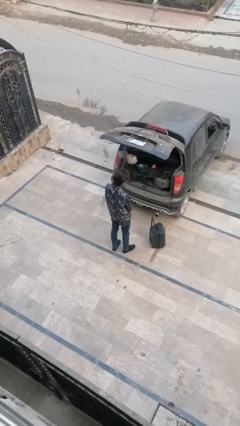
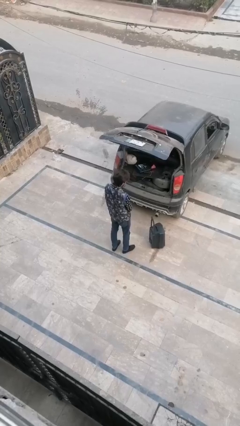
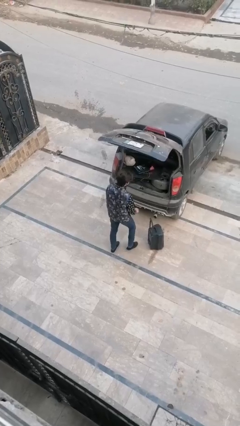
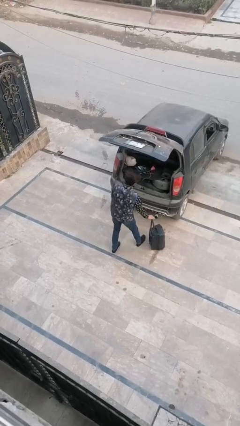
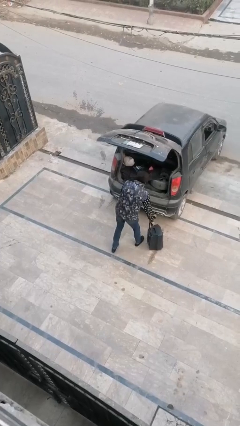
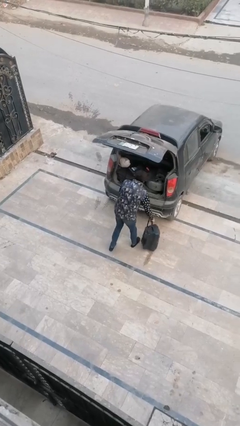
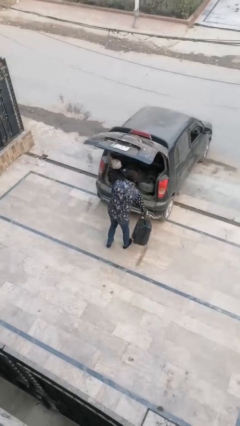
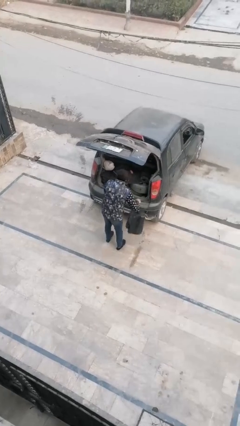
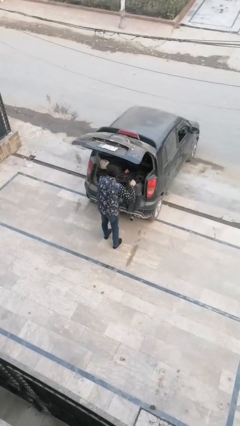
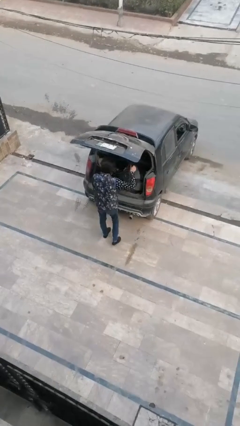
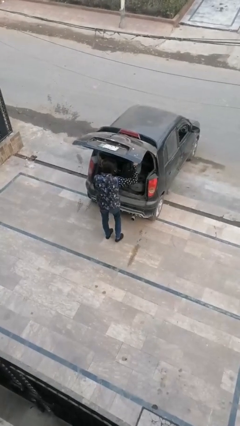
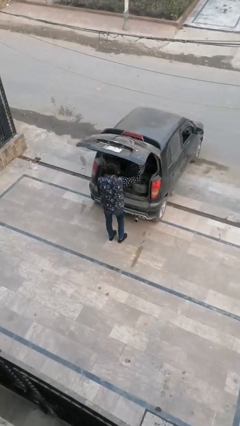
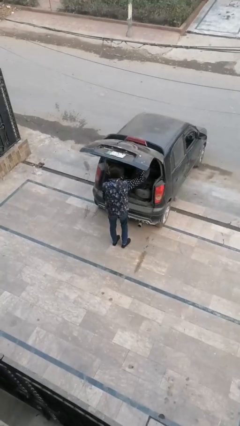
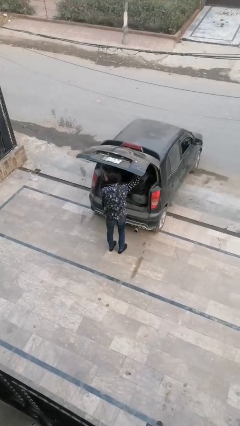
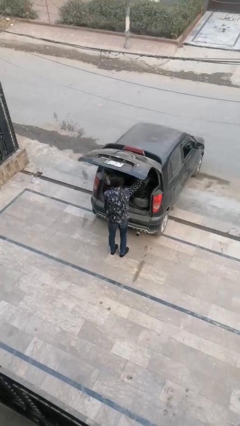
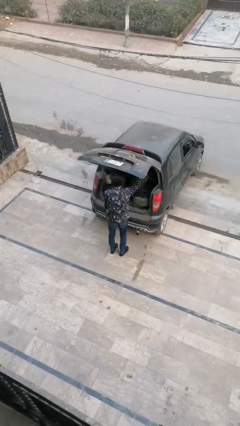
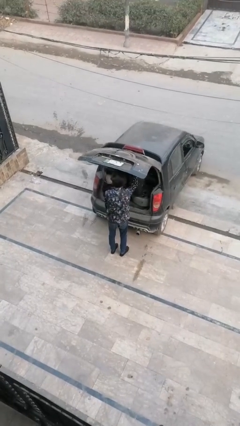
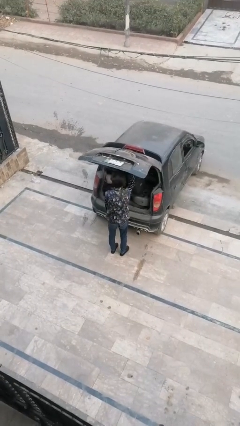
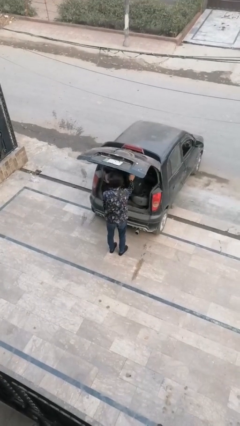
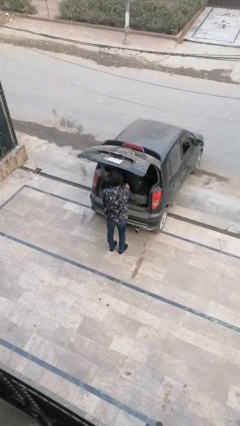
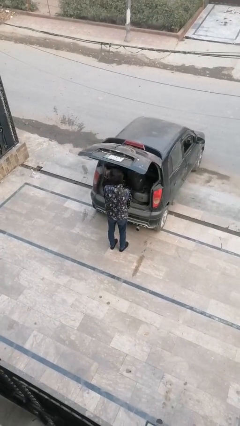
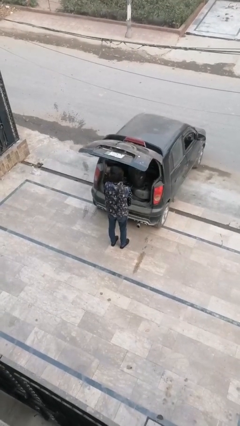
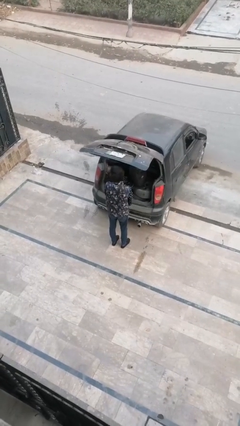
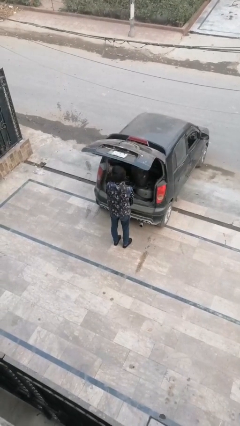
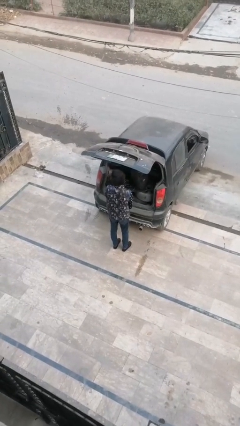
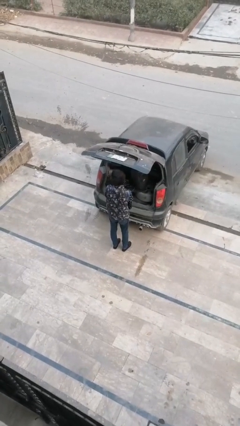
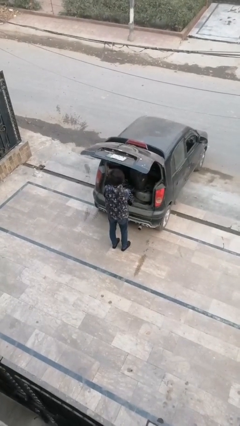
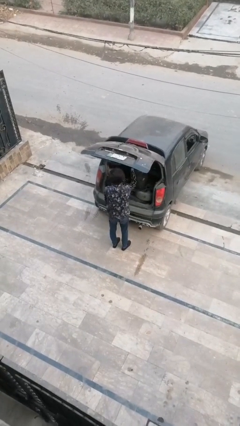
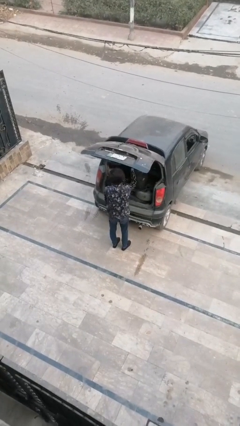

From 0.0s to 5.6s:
person loads car

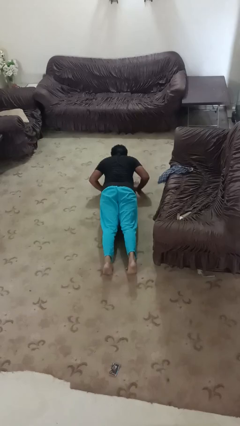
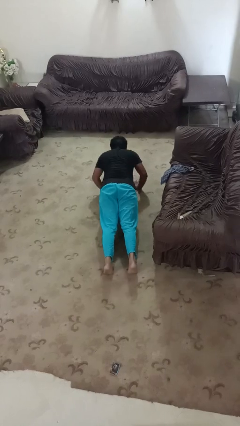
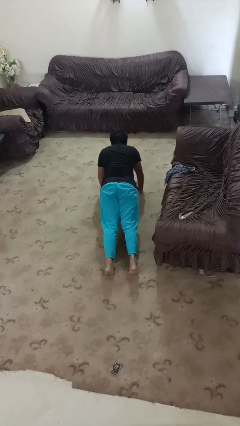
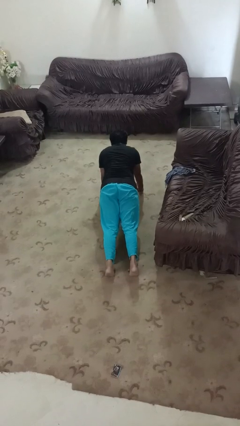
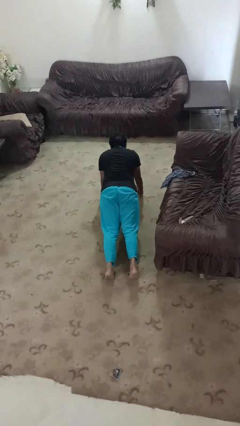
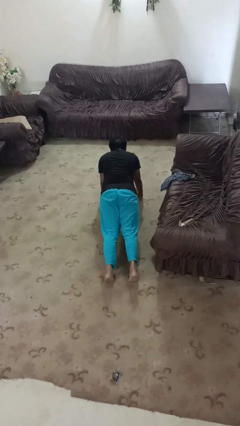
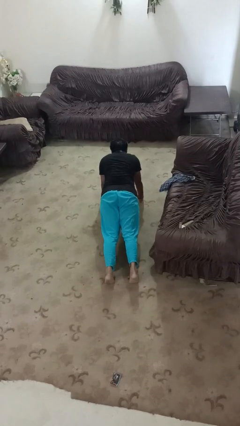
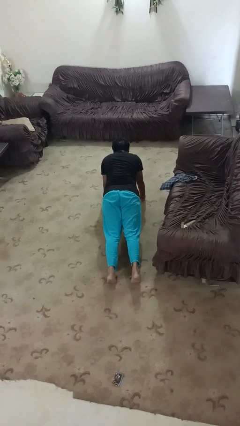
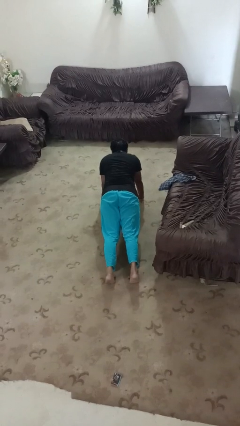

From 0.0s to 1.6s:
person exercises with pushup

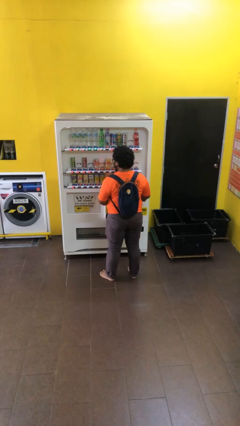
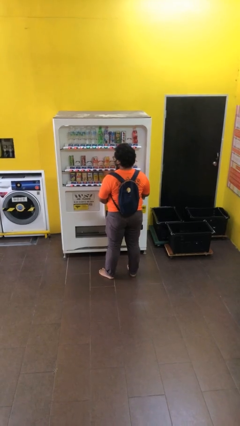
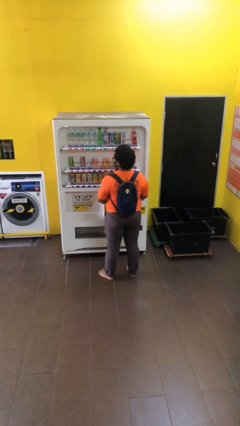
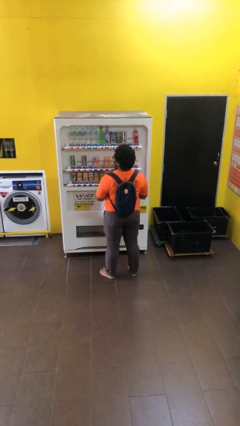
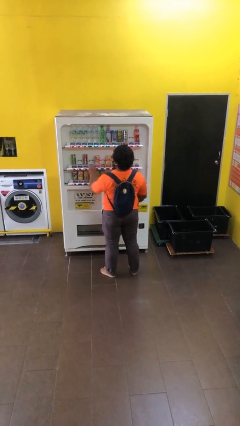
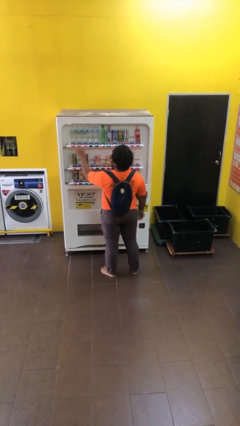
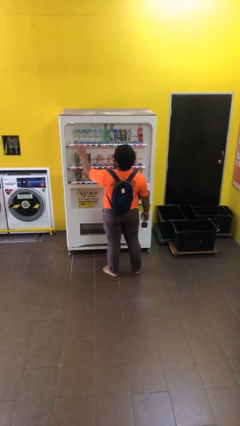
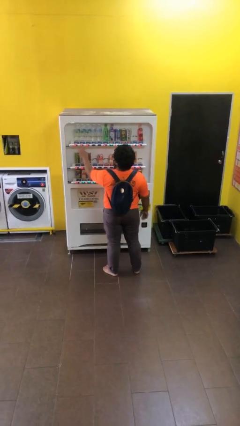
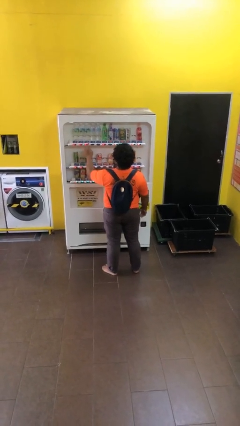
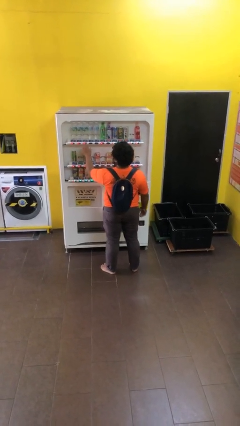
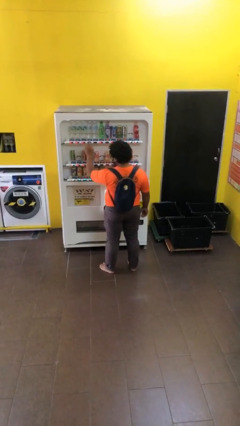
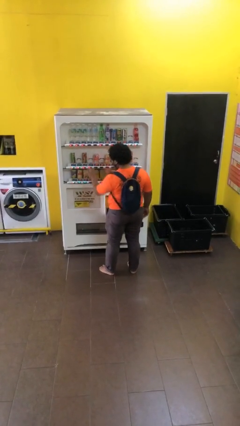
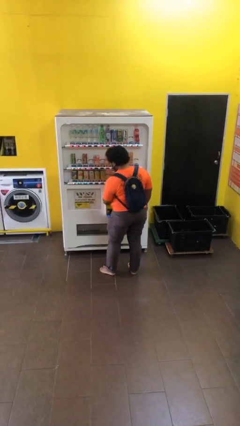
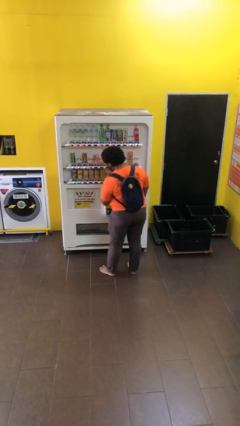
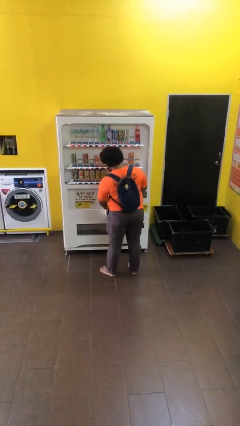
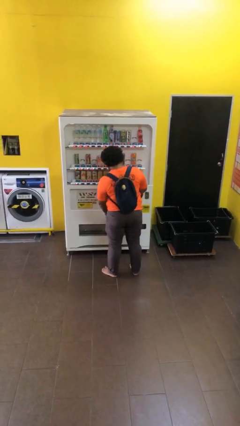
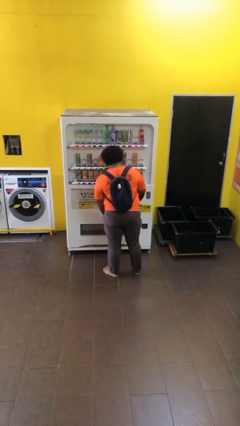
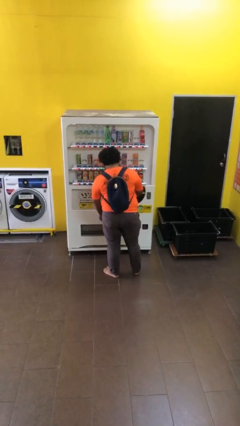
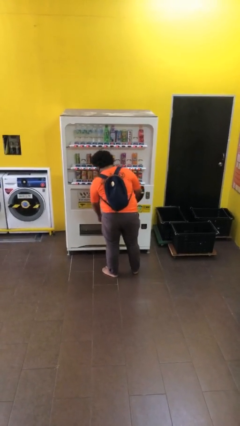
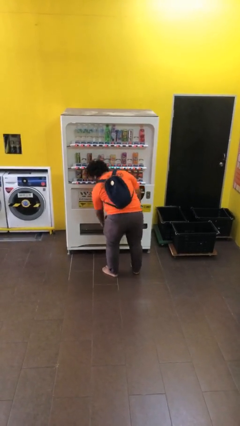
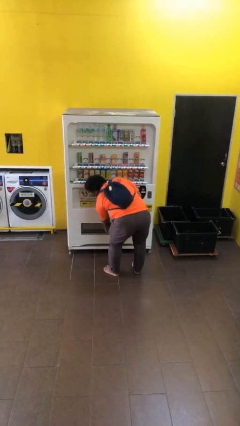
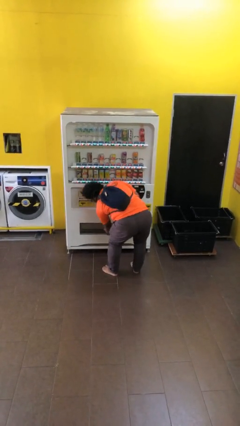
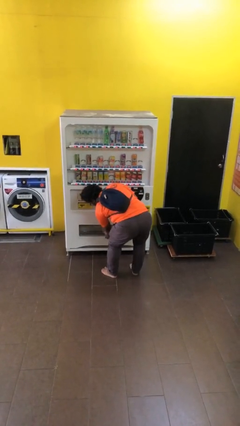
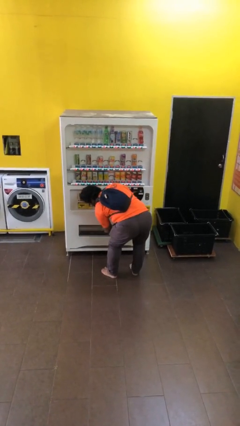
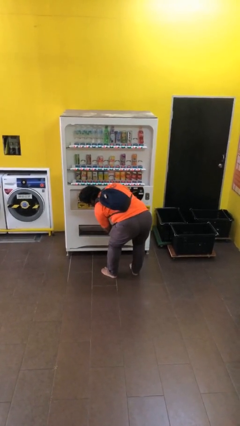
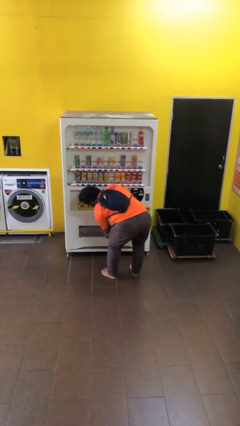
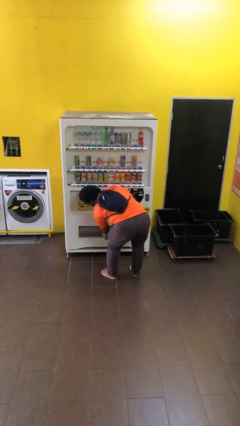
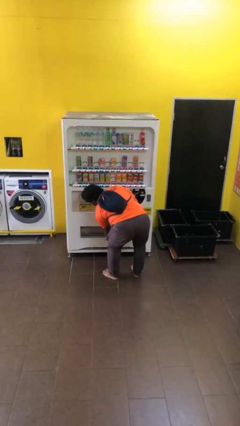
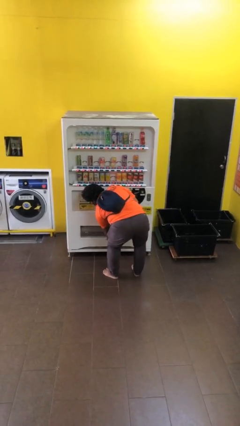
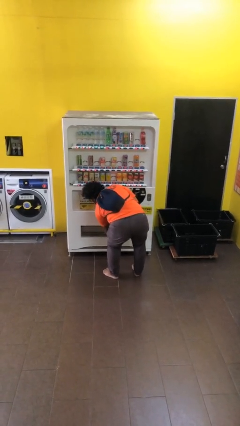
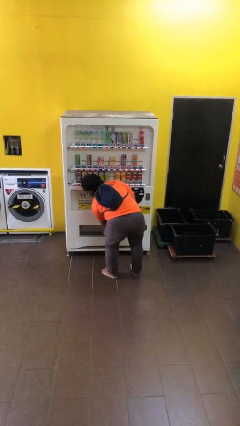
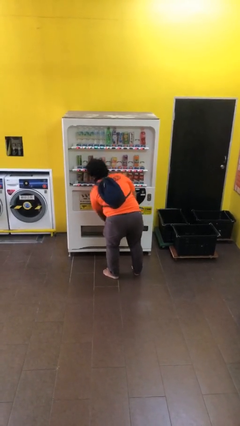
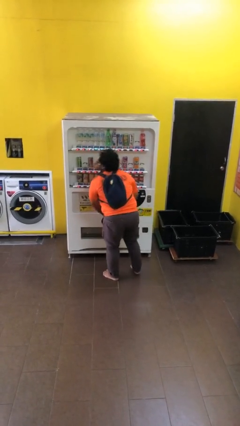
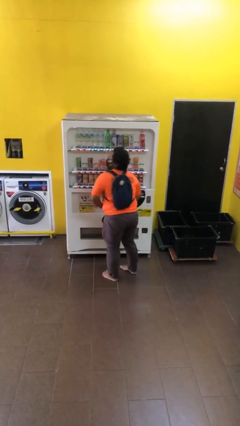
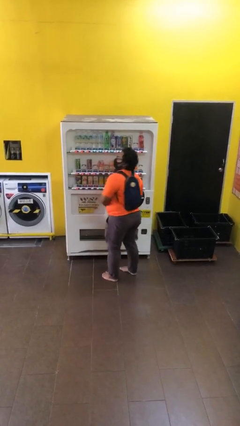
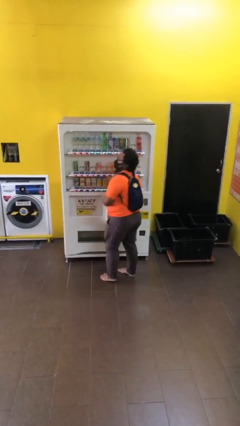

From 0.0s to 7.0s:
person purchases from machine

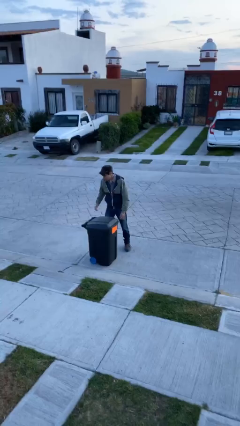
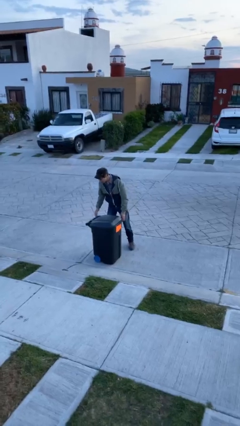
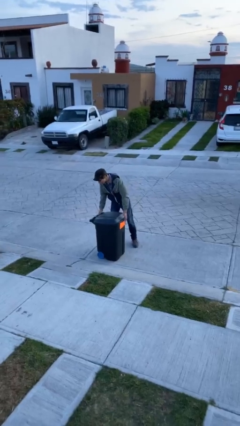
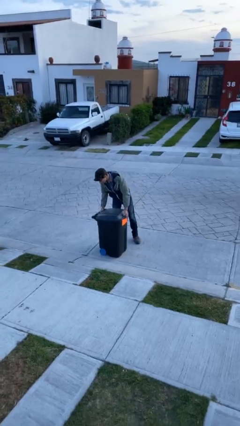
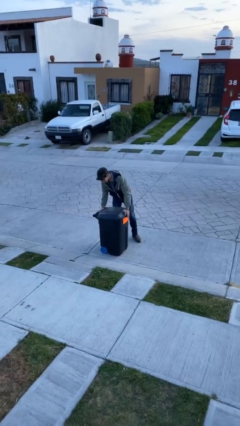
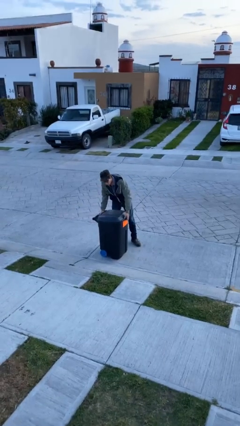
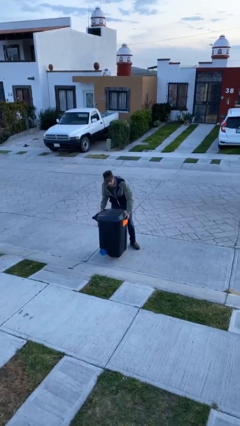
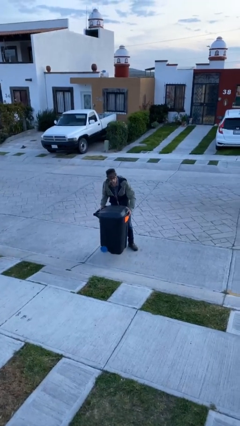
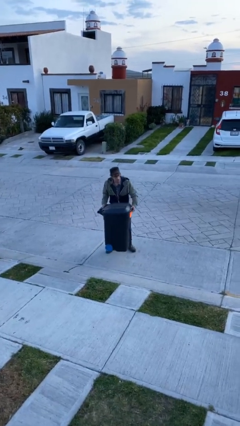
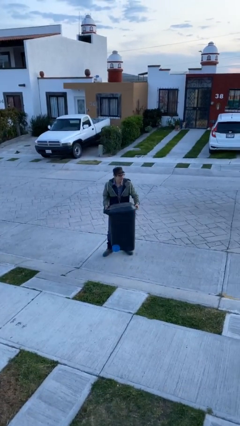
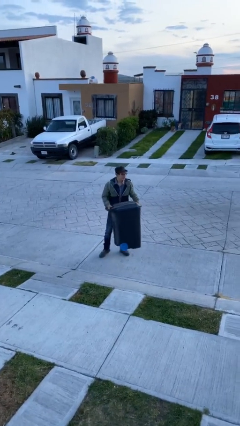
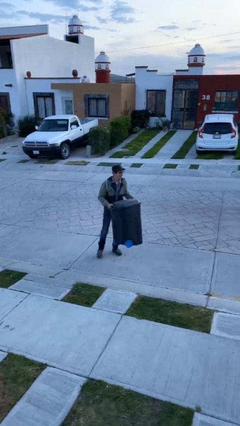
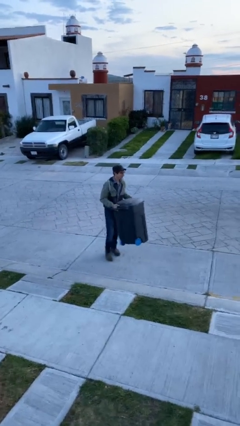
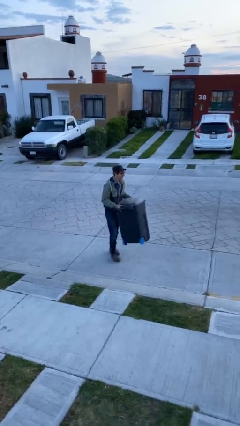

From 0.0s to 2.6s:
person picks up object from floor

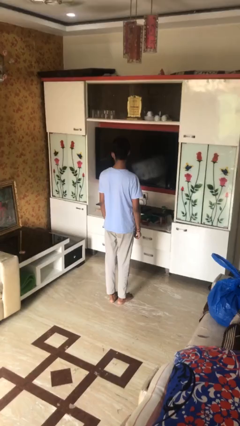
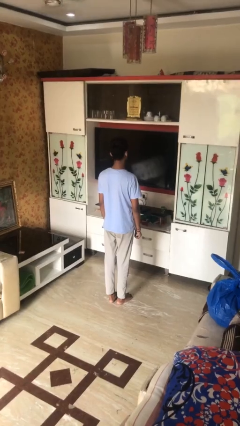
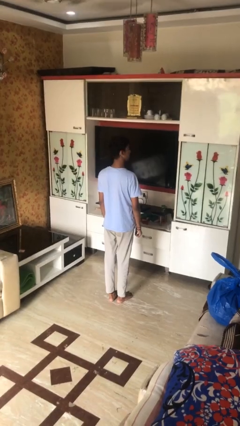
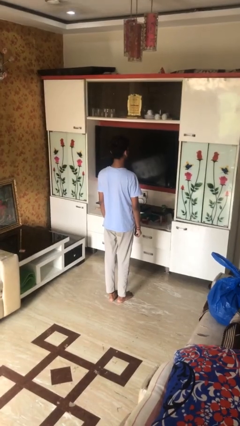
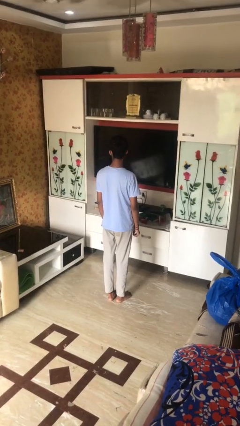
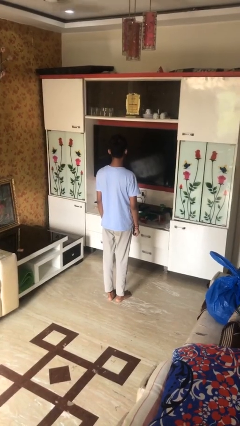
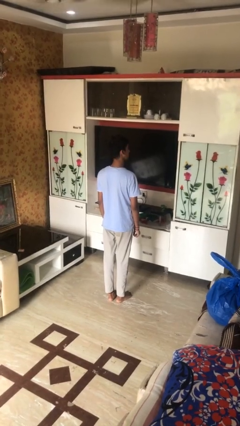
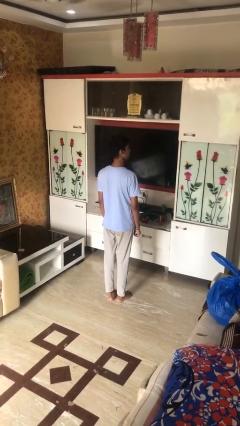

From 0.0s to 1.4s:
person shakes head
